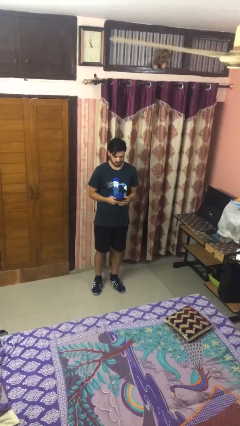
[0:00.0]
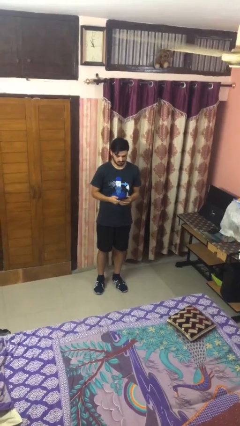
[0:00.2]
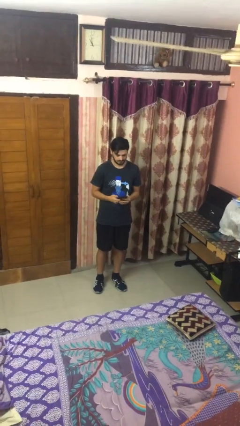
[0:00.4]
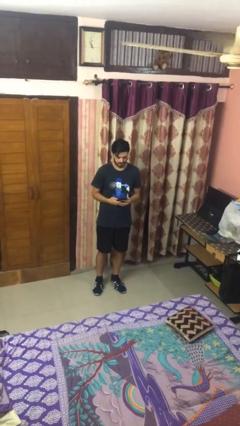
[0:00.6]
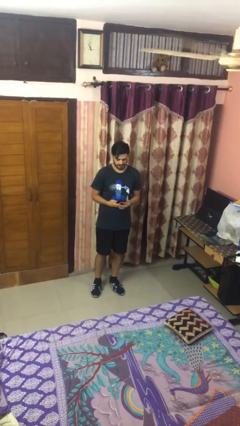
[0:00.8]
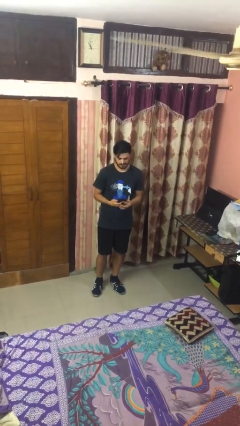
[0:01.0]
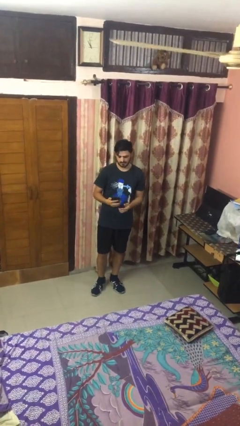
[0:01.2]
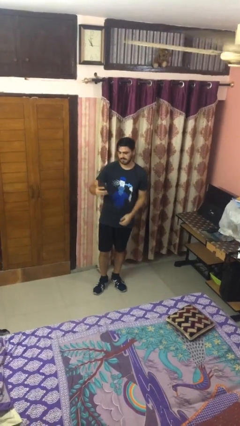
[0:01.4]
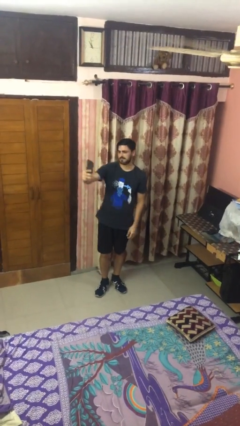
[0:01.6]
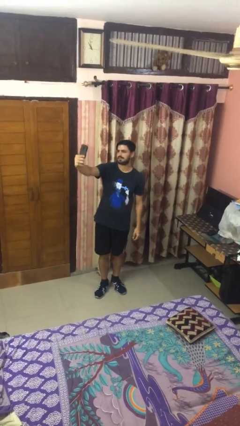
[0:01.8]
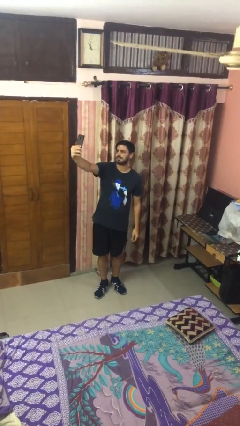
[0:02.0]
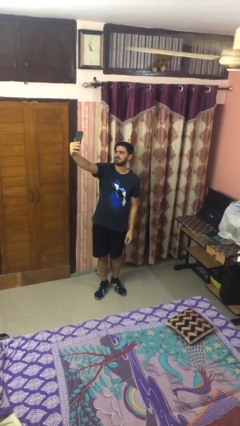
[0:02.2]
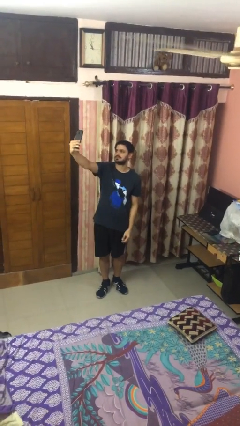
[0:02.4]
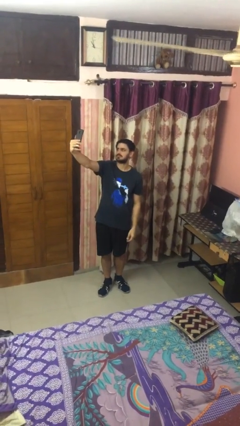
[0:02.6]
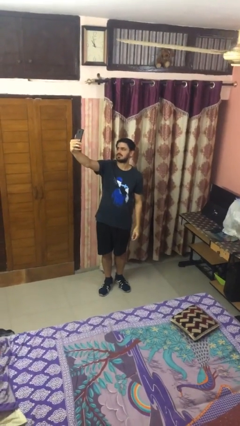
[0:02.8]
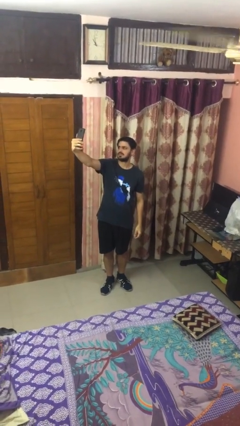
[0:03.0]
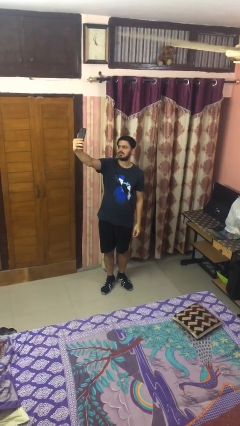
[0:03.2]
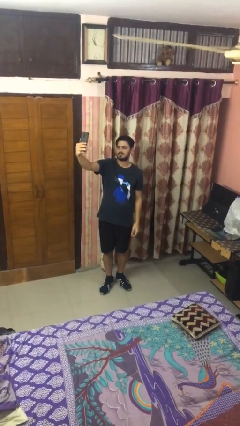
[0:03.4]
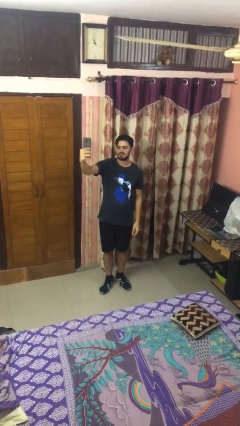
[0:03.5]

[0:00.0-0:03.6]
person takes selfie

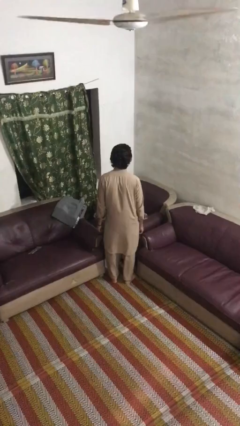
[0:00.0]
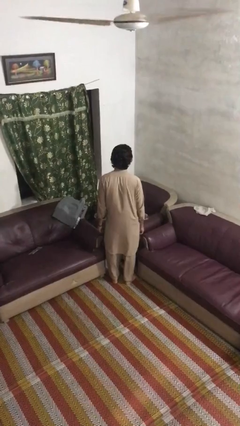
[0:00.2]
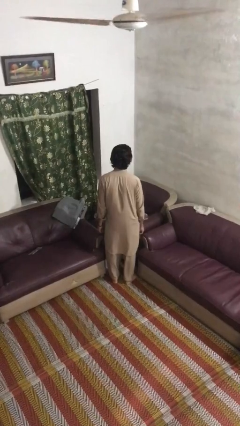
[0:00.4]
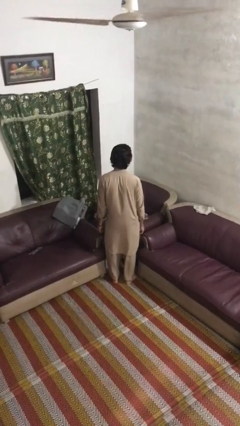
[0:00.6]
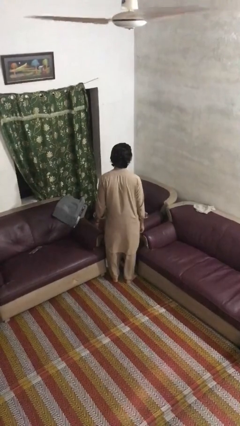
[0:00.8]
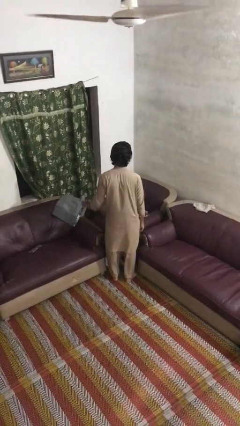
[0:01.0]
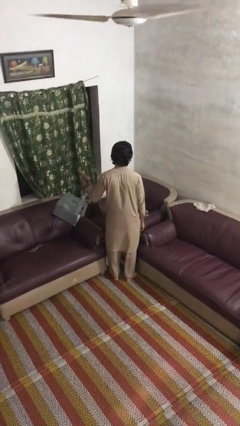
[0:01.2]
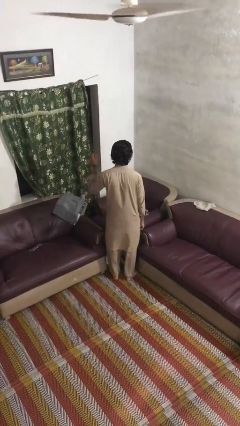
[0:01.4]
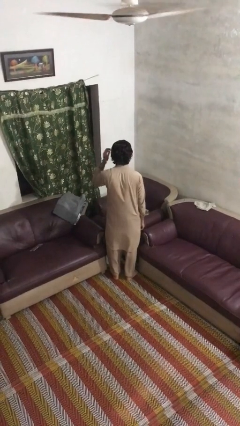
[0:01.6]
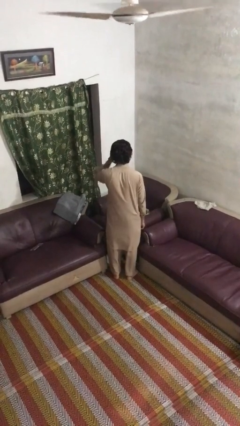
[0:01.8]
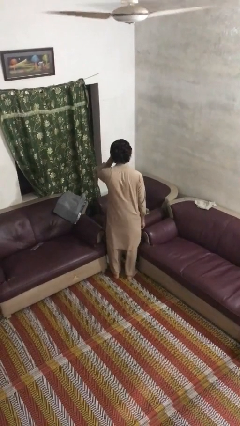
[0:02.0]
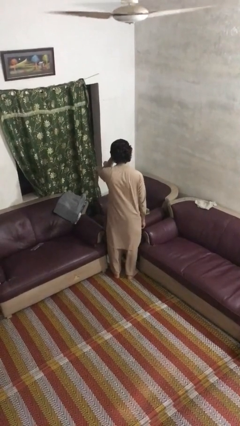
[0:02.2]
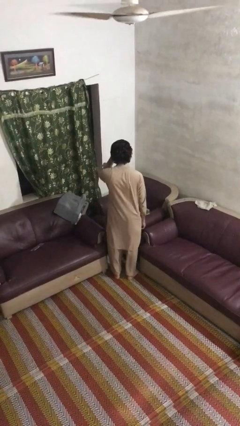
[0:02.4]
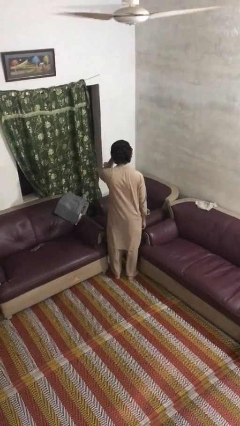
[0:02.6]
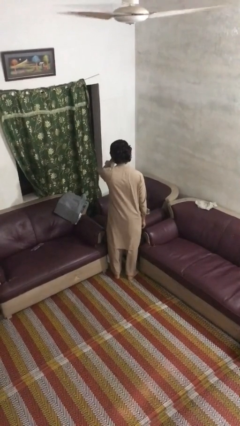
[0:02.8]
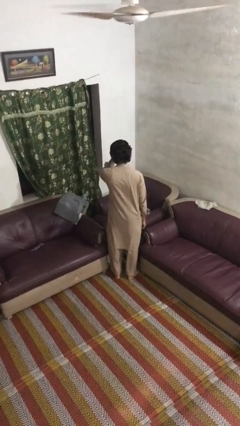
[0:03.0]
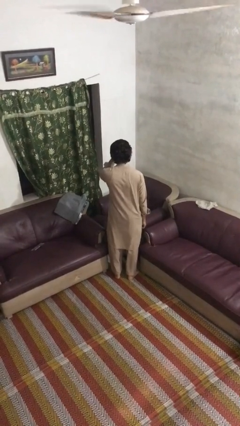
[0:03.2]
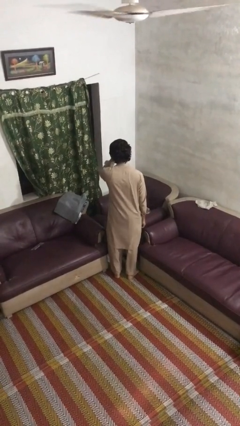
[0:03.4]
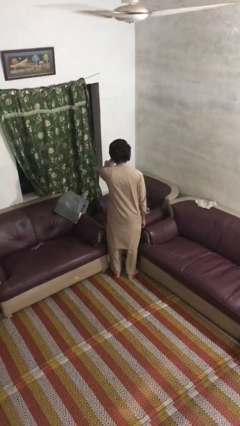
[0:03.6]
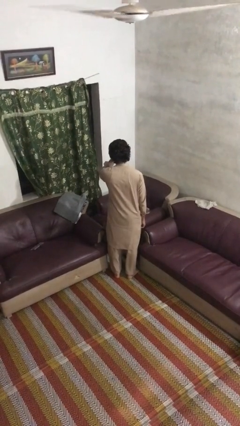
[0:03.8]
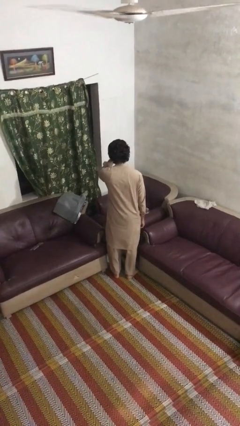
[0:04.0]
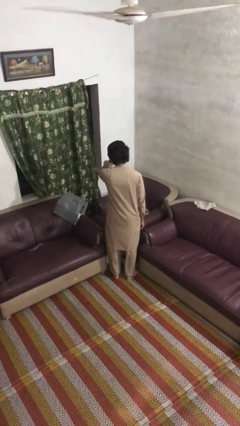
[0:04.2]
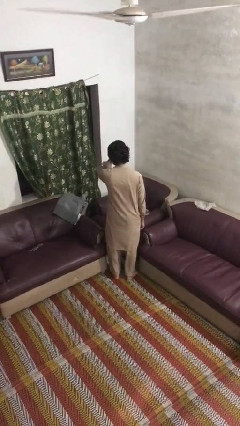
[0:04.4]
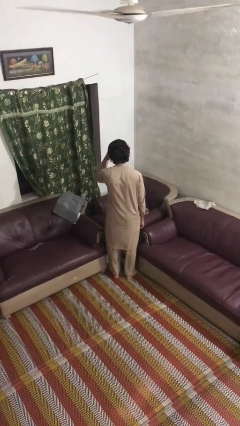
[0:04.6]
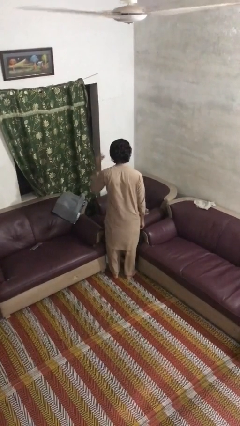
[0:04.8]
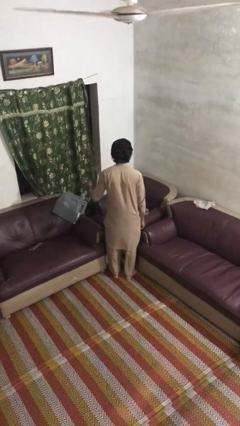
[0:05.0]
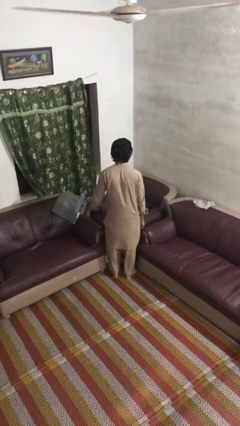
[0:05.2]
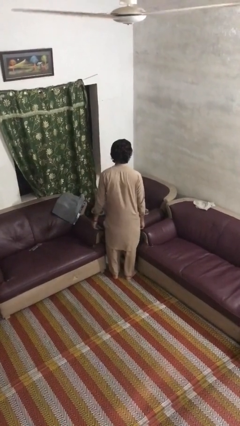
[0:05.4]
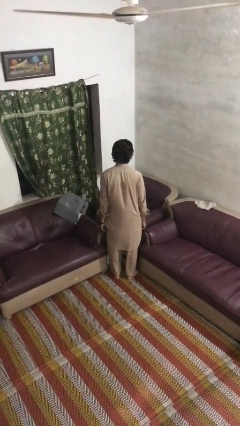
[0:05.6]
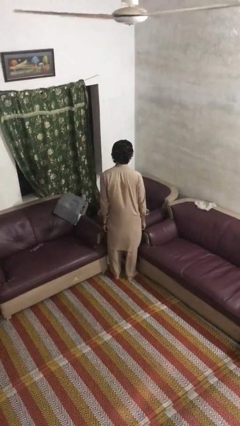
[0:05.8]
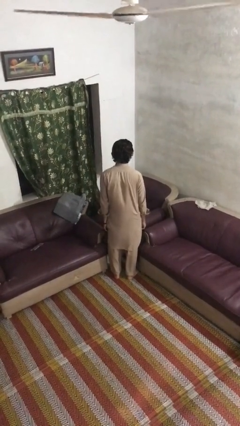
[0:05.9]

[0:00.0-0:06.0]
person scratches face

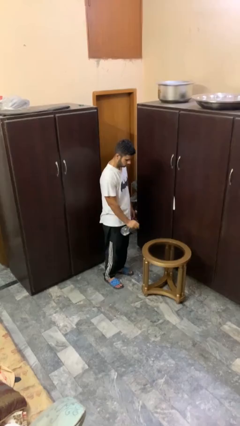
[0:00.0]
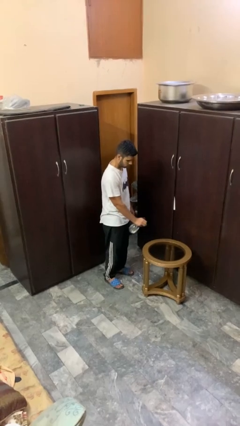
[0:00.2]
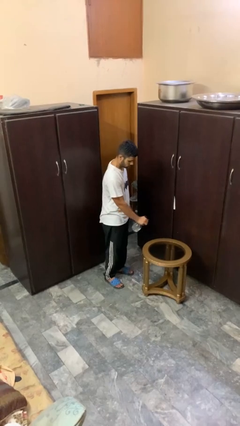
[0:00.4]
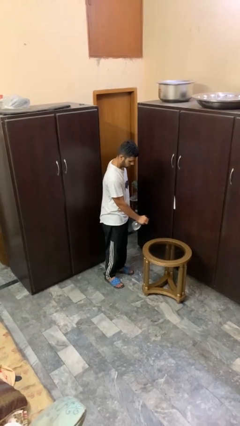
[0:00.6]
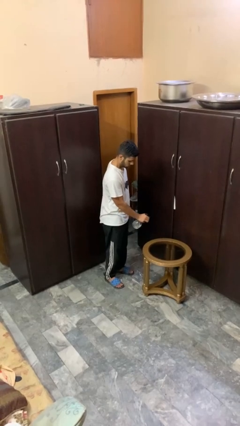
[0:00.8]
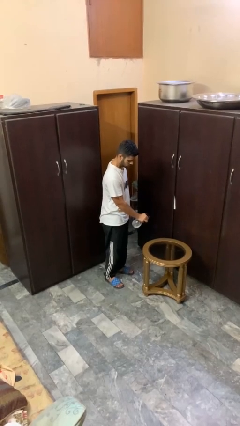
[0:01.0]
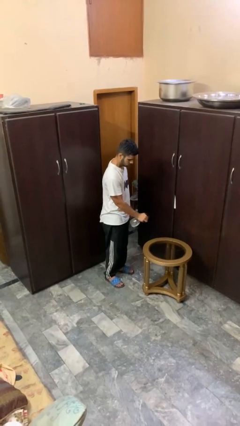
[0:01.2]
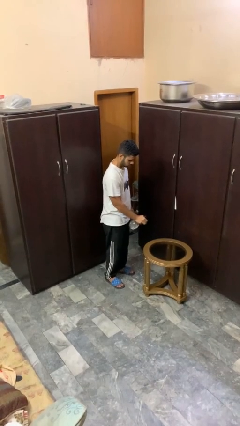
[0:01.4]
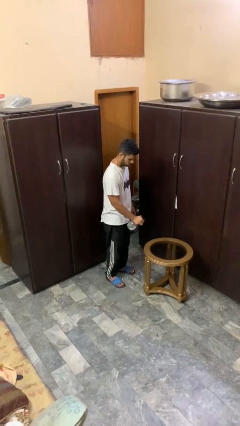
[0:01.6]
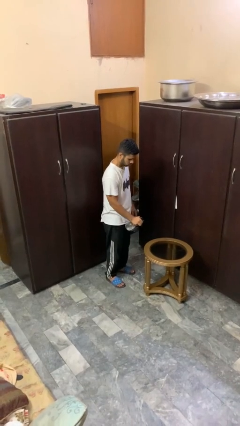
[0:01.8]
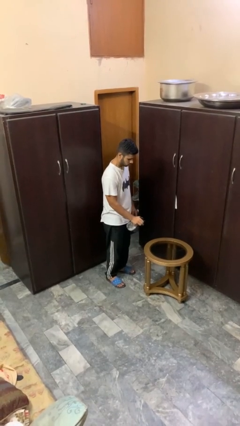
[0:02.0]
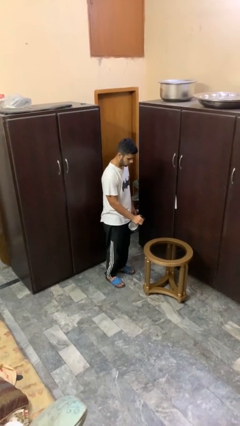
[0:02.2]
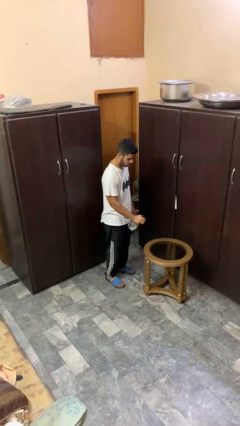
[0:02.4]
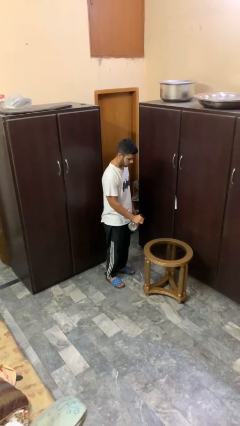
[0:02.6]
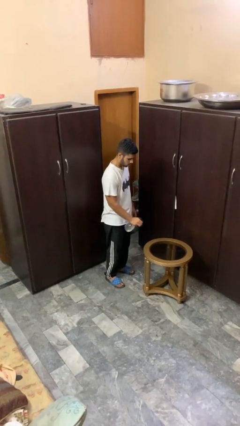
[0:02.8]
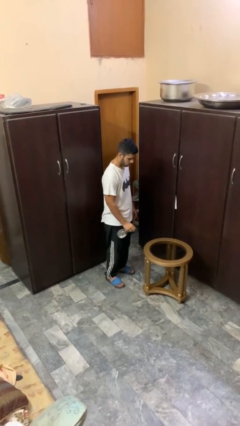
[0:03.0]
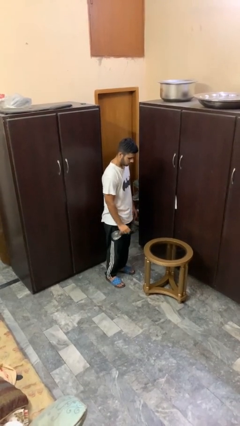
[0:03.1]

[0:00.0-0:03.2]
person sprays from bottle

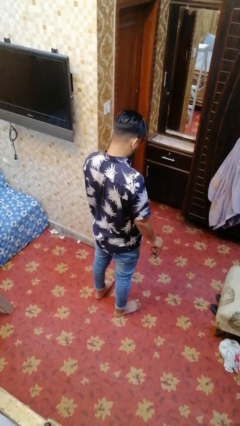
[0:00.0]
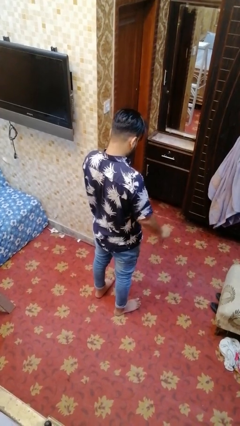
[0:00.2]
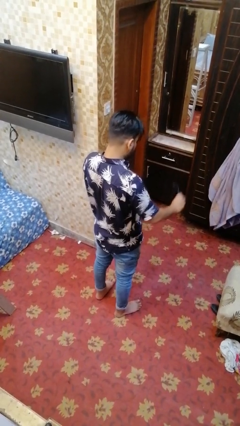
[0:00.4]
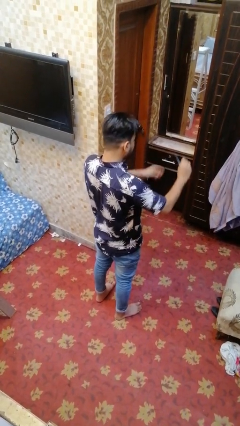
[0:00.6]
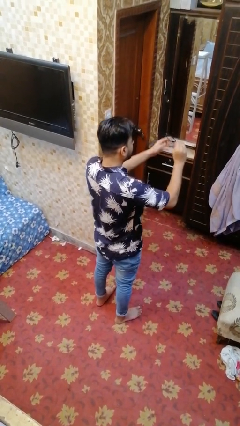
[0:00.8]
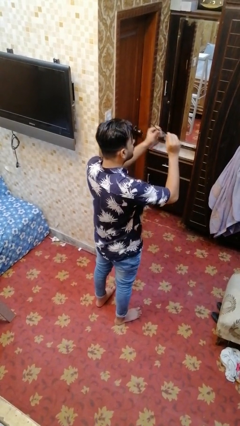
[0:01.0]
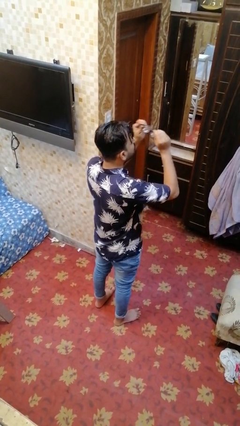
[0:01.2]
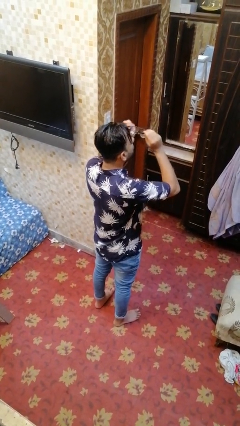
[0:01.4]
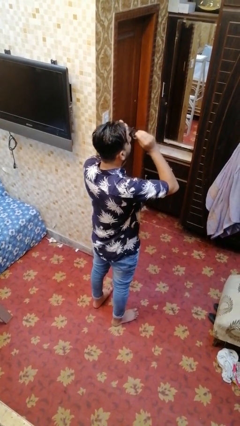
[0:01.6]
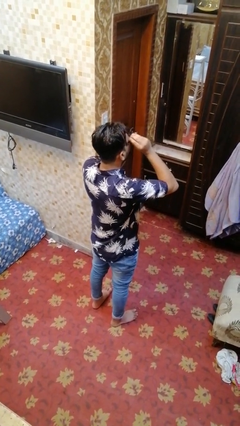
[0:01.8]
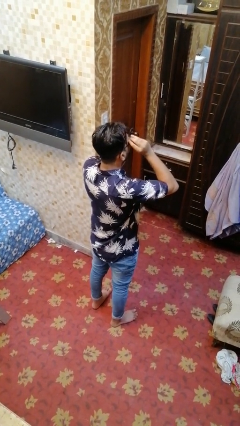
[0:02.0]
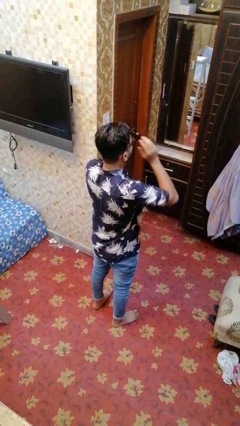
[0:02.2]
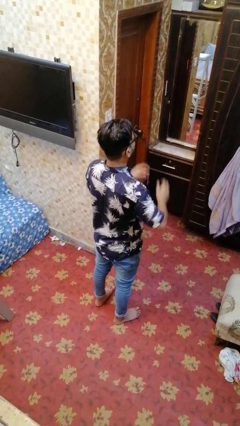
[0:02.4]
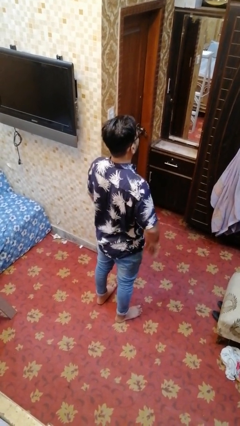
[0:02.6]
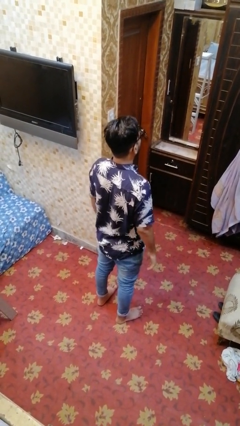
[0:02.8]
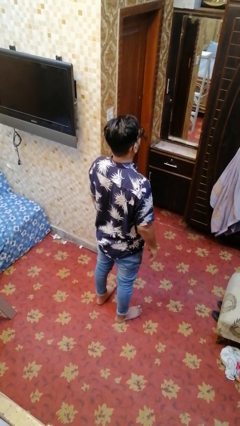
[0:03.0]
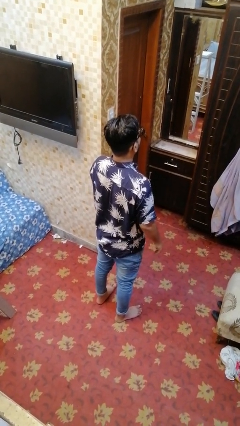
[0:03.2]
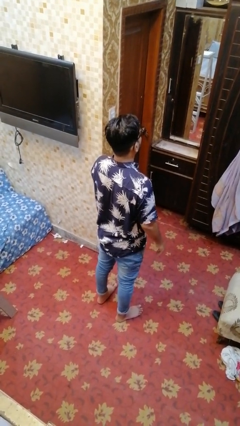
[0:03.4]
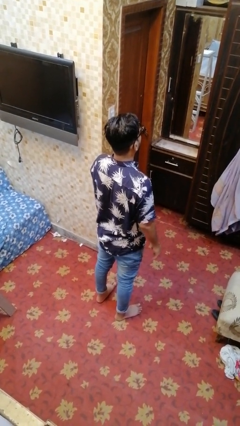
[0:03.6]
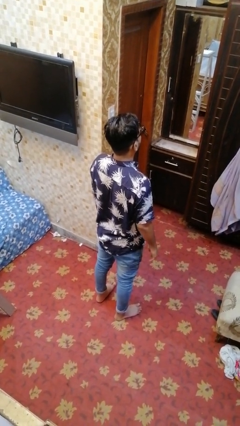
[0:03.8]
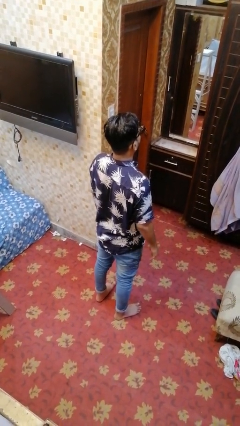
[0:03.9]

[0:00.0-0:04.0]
person puts on glasses

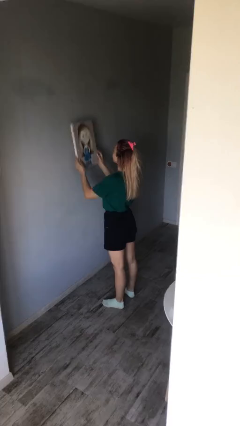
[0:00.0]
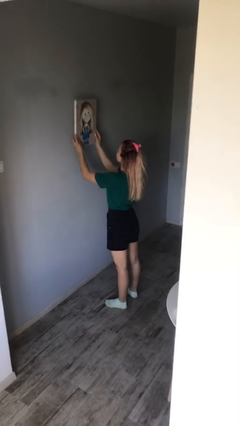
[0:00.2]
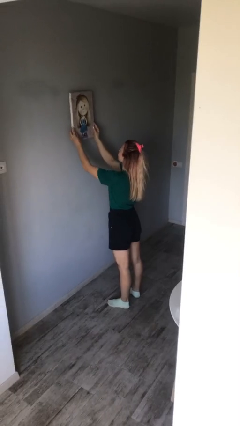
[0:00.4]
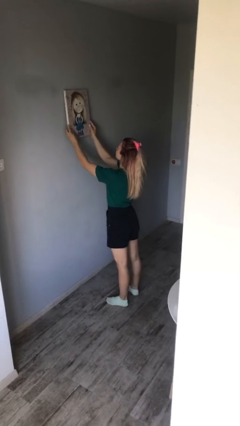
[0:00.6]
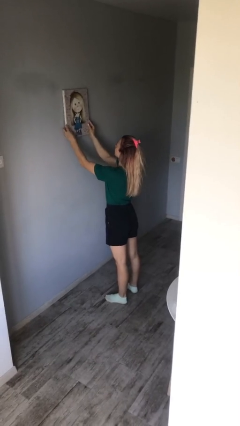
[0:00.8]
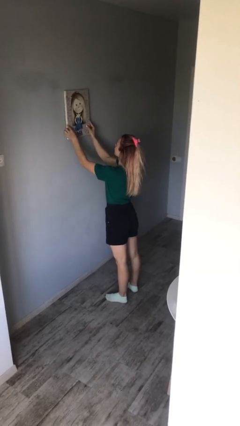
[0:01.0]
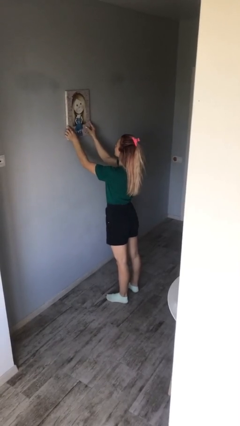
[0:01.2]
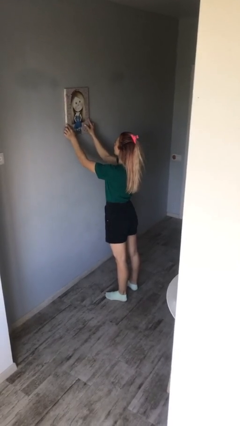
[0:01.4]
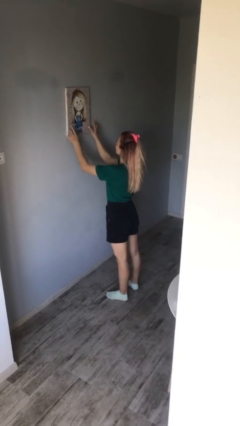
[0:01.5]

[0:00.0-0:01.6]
person puts up picture frame
